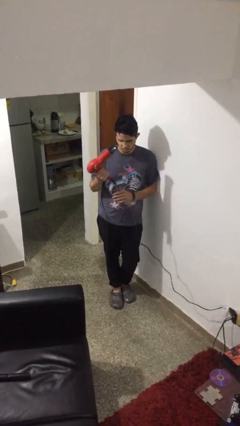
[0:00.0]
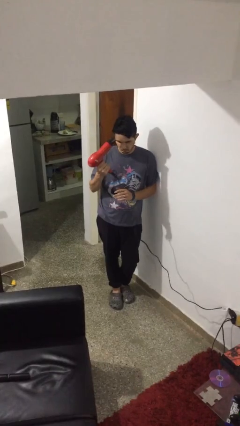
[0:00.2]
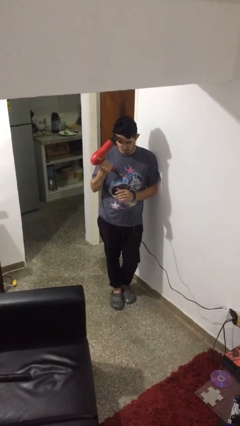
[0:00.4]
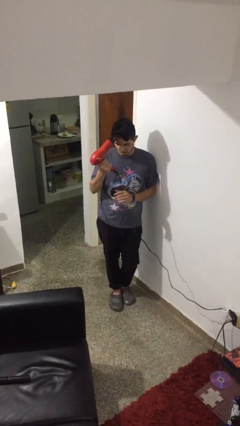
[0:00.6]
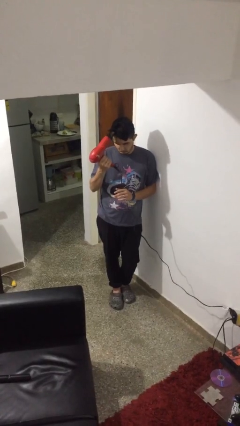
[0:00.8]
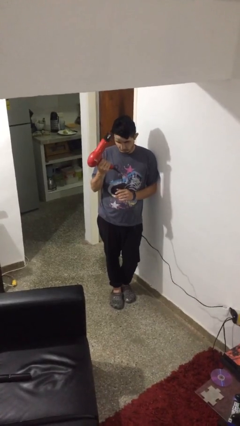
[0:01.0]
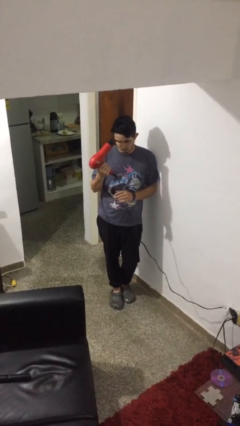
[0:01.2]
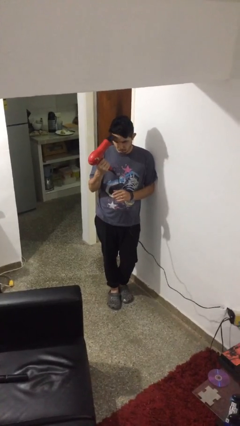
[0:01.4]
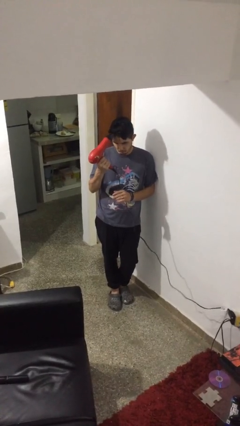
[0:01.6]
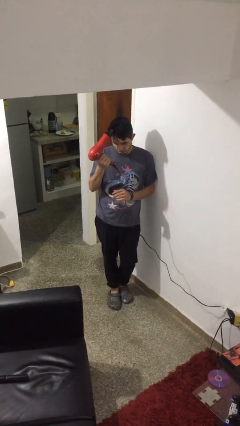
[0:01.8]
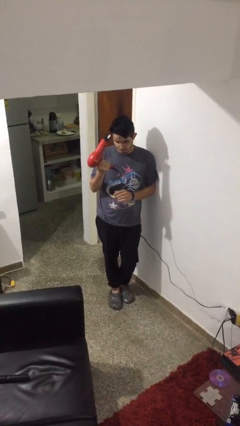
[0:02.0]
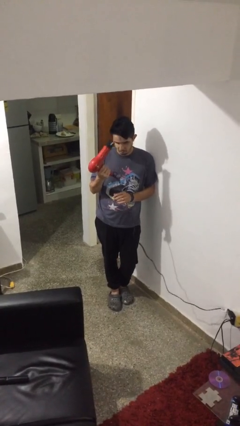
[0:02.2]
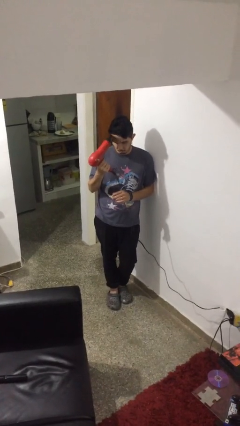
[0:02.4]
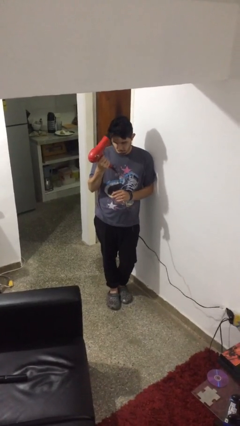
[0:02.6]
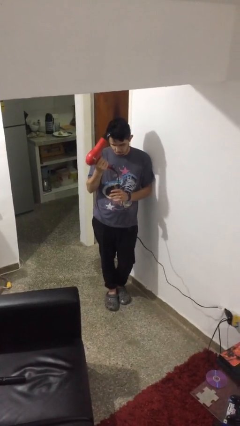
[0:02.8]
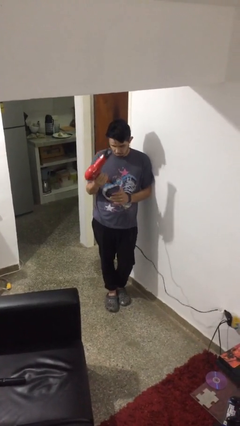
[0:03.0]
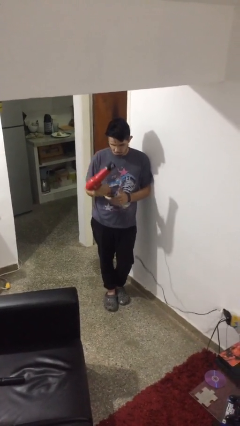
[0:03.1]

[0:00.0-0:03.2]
person dries hair with hairdryer

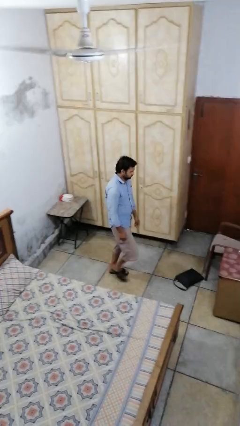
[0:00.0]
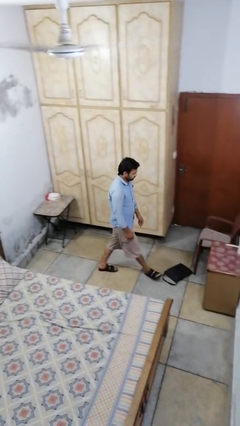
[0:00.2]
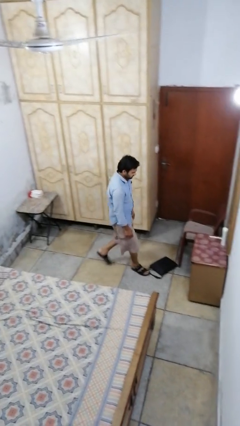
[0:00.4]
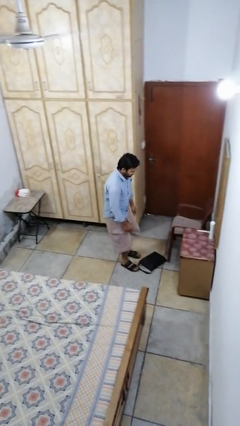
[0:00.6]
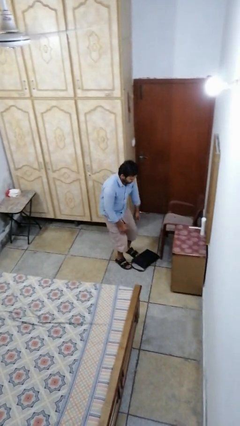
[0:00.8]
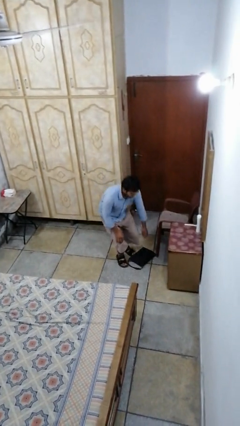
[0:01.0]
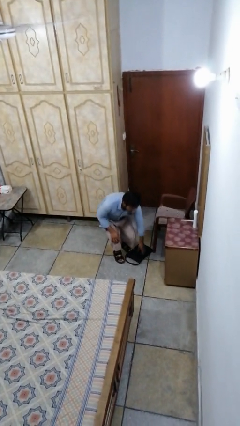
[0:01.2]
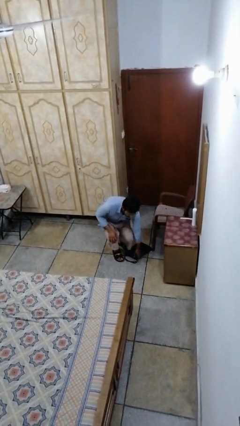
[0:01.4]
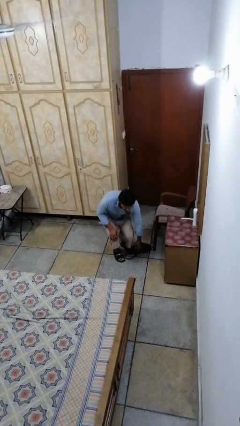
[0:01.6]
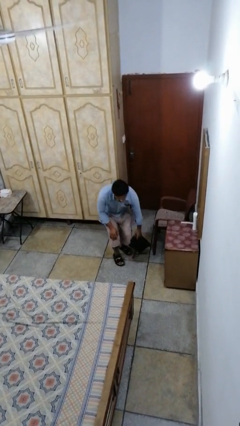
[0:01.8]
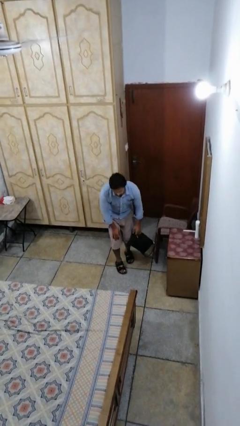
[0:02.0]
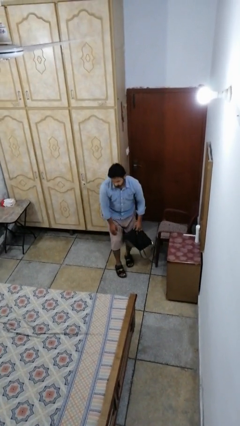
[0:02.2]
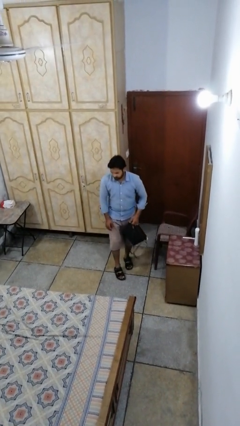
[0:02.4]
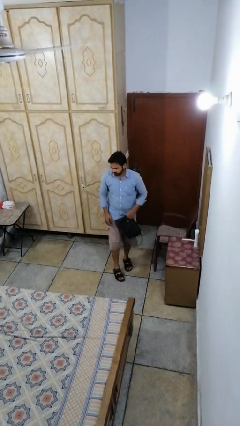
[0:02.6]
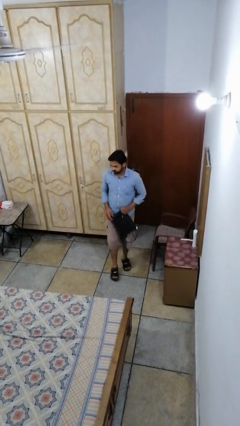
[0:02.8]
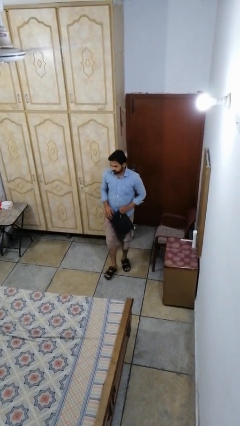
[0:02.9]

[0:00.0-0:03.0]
person picks up object from floor

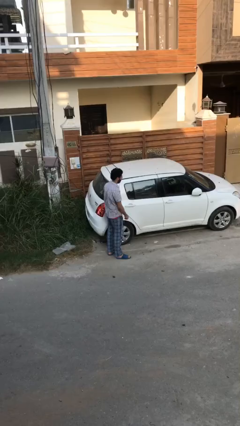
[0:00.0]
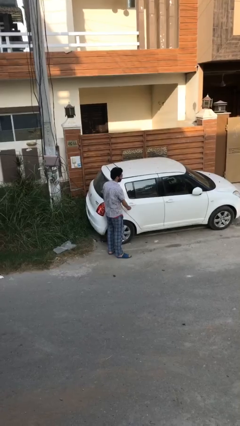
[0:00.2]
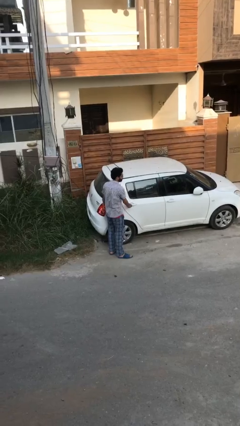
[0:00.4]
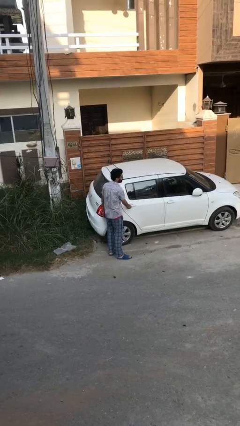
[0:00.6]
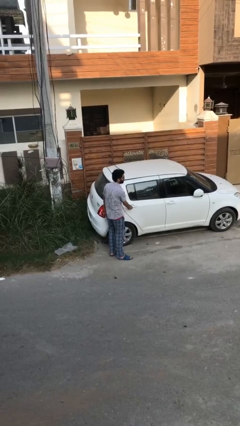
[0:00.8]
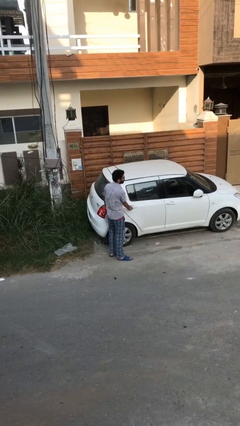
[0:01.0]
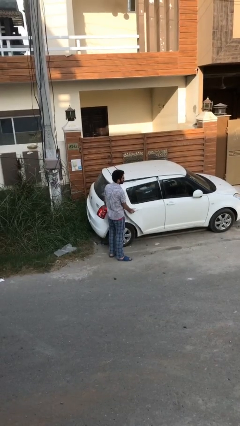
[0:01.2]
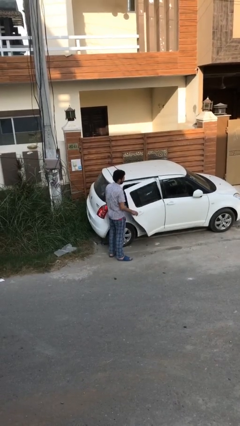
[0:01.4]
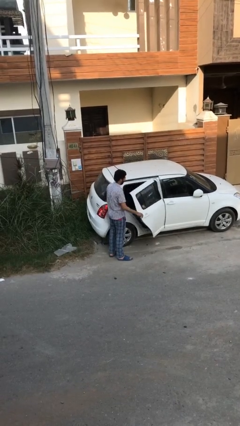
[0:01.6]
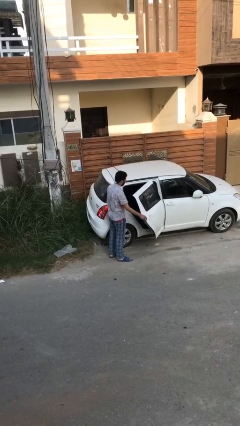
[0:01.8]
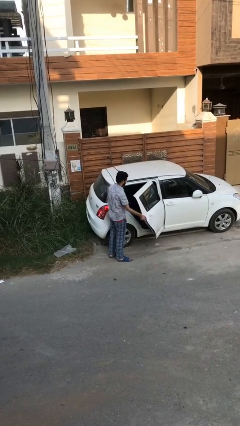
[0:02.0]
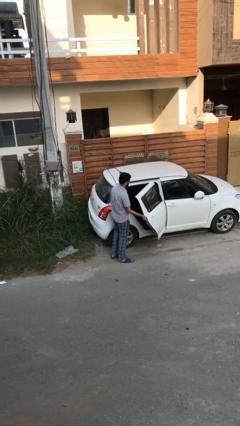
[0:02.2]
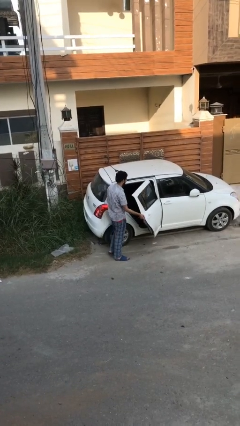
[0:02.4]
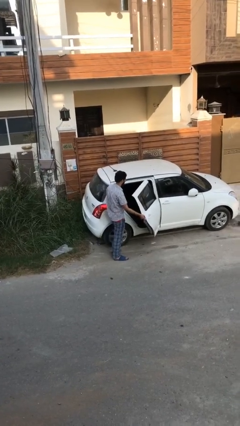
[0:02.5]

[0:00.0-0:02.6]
person opens car door

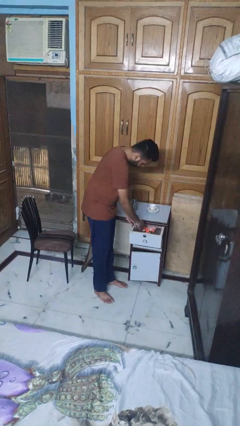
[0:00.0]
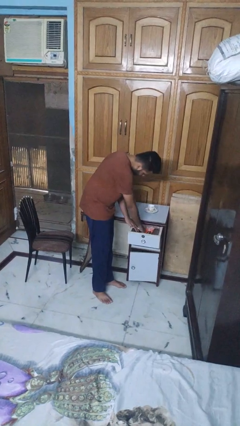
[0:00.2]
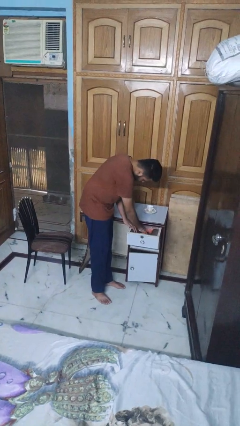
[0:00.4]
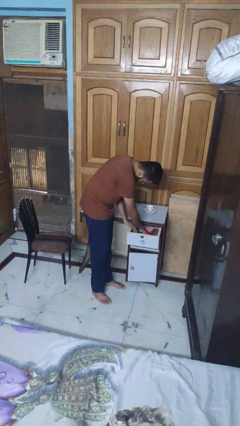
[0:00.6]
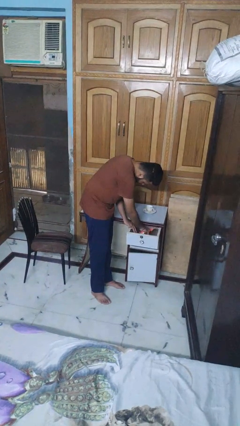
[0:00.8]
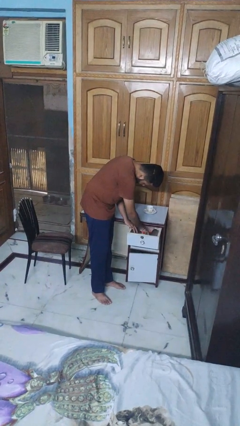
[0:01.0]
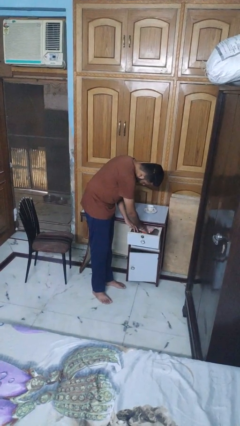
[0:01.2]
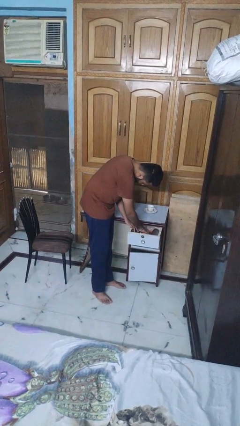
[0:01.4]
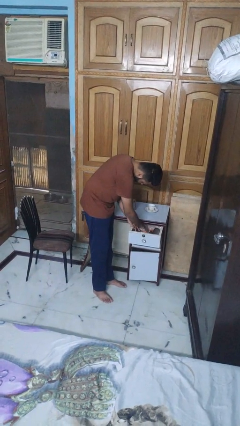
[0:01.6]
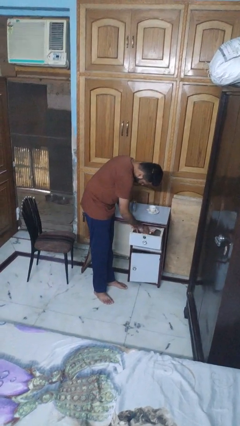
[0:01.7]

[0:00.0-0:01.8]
person searches in kitchen drawer

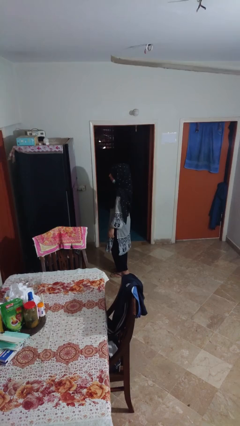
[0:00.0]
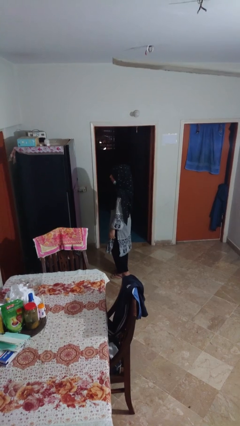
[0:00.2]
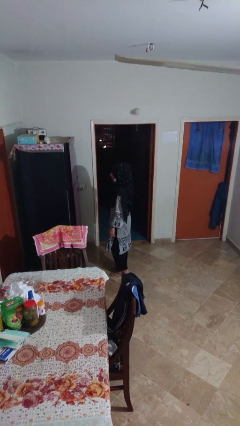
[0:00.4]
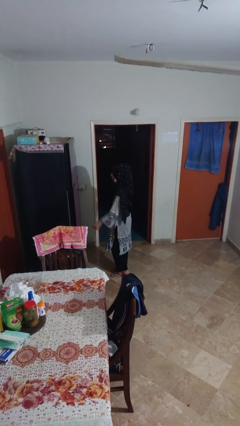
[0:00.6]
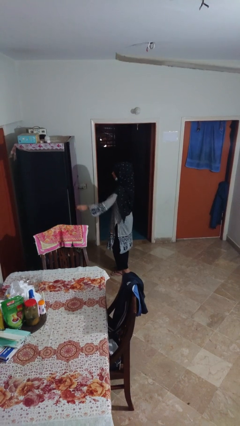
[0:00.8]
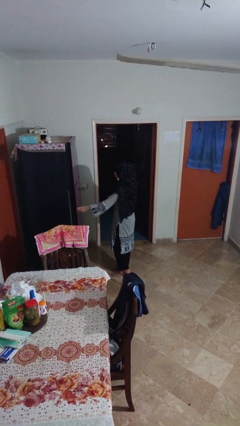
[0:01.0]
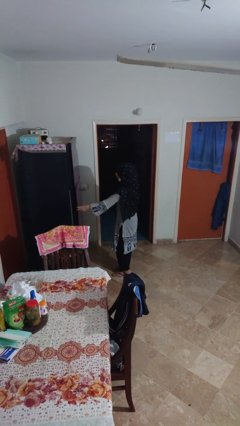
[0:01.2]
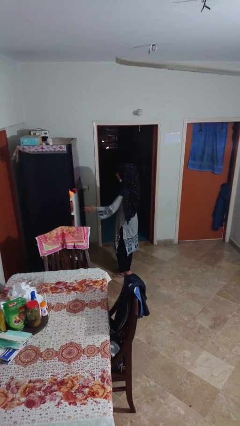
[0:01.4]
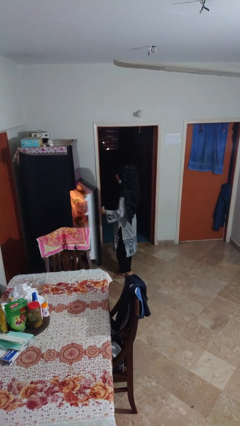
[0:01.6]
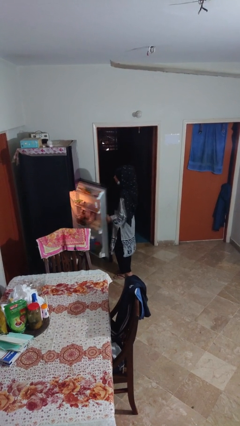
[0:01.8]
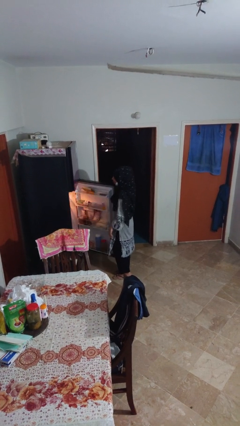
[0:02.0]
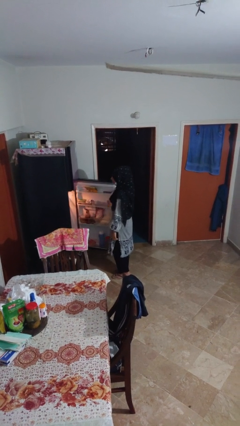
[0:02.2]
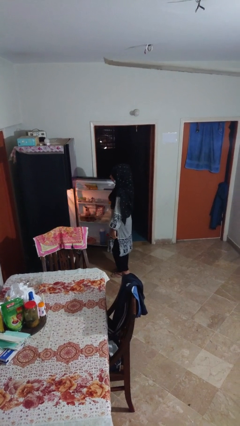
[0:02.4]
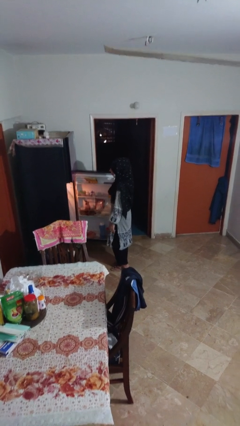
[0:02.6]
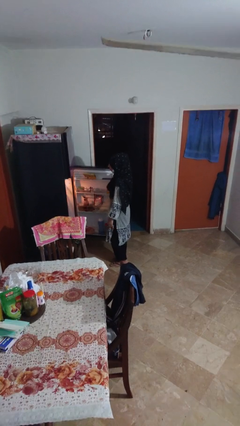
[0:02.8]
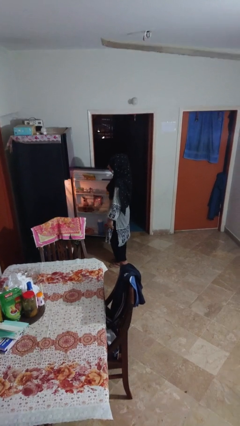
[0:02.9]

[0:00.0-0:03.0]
person opens refrigerator

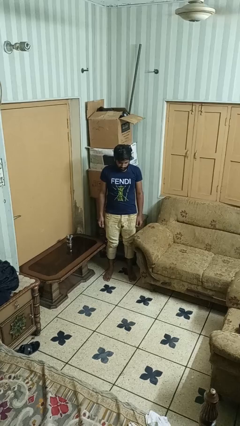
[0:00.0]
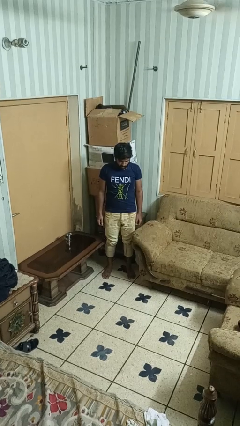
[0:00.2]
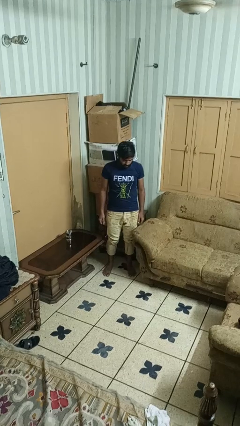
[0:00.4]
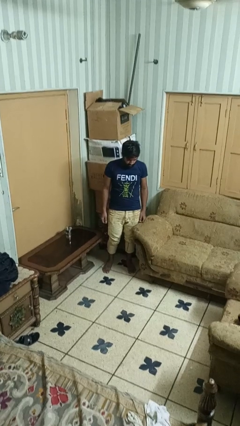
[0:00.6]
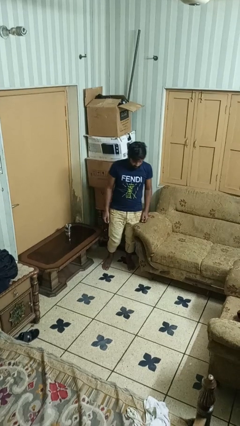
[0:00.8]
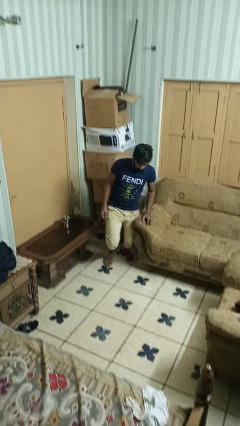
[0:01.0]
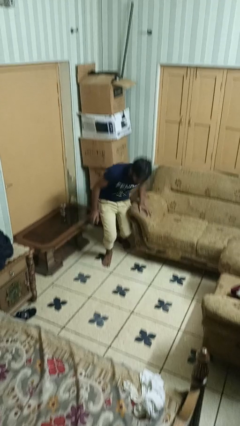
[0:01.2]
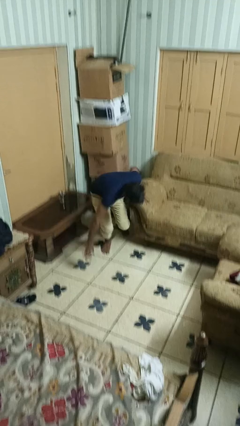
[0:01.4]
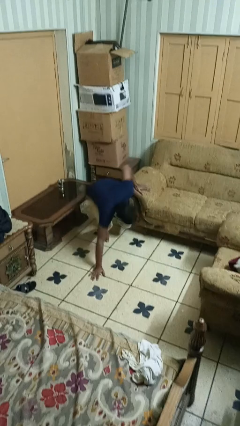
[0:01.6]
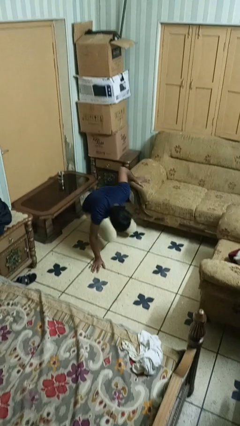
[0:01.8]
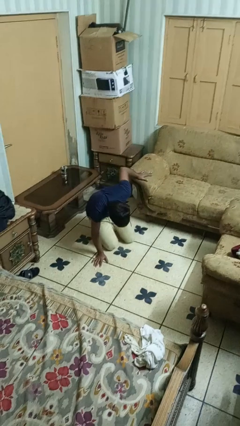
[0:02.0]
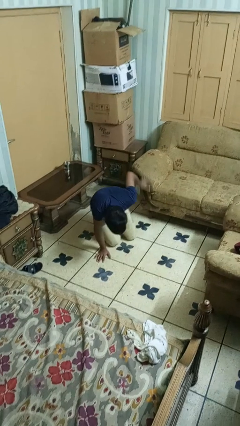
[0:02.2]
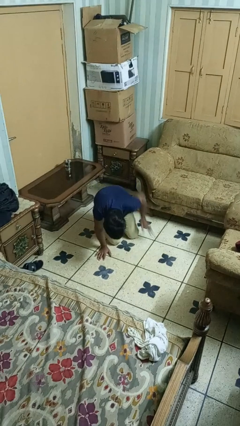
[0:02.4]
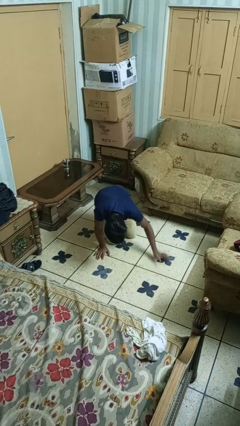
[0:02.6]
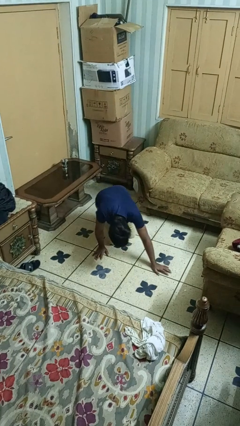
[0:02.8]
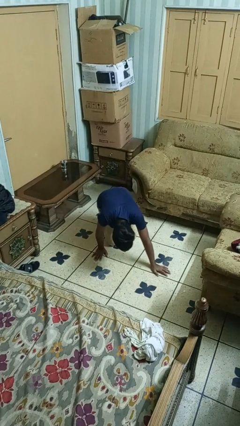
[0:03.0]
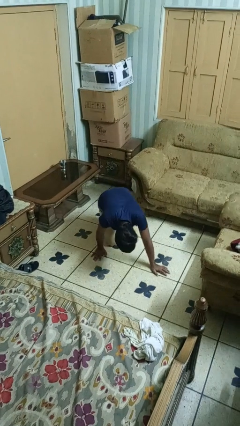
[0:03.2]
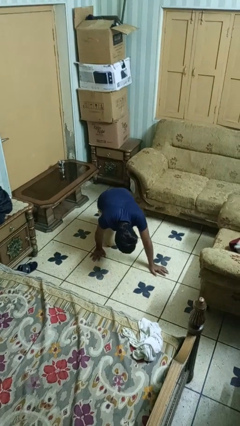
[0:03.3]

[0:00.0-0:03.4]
person trips on object on floor

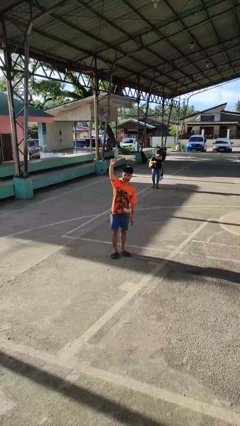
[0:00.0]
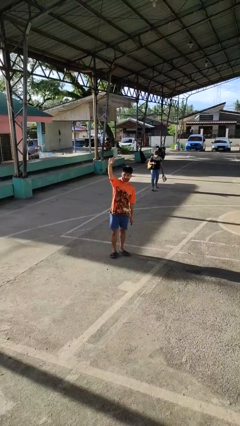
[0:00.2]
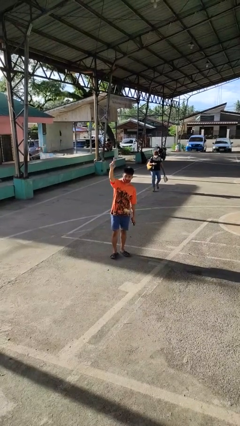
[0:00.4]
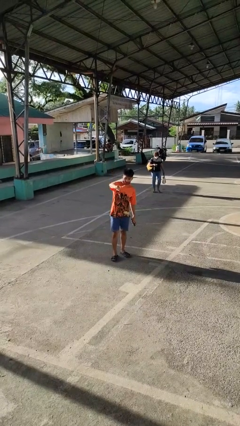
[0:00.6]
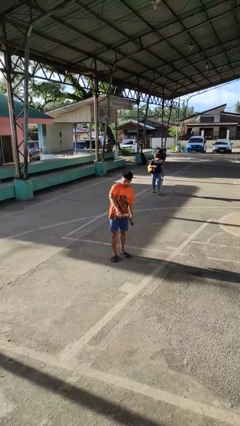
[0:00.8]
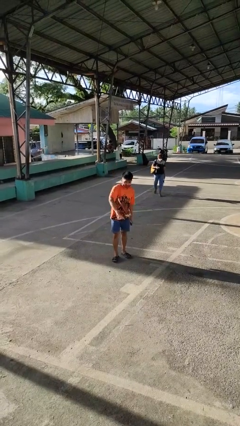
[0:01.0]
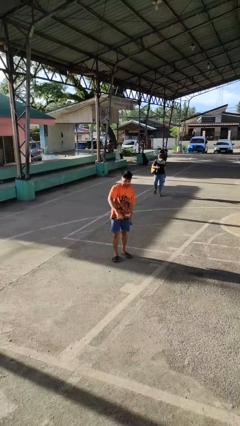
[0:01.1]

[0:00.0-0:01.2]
person gestures swipe down
